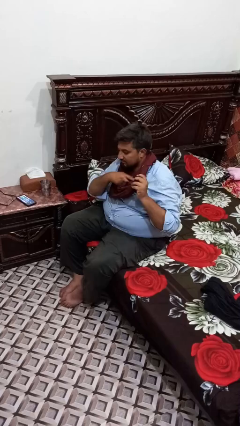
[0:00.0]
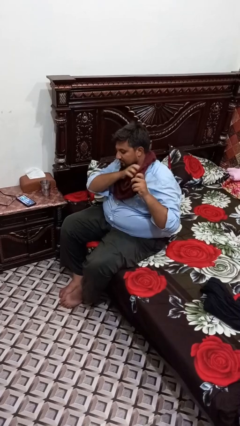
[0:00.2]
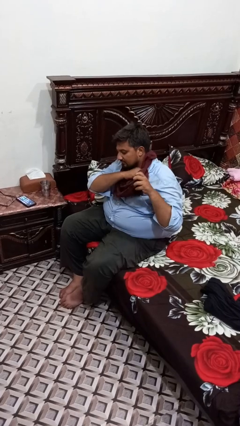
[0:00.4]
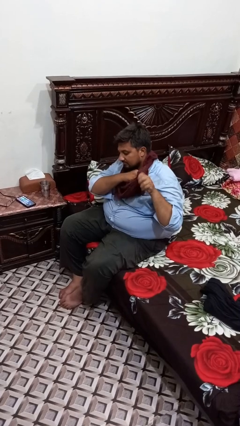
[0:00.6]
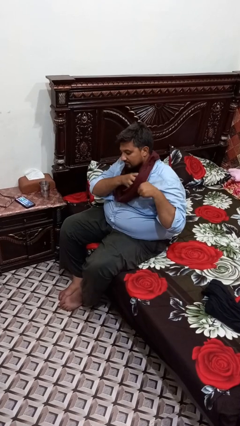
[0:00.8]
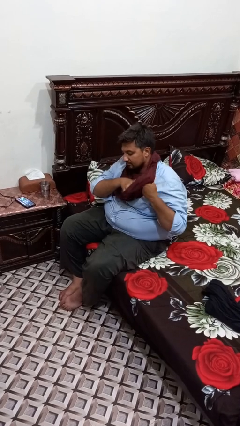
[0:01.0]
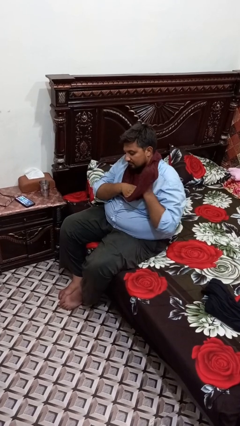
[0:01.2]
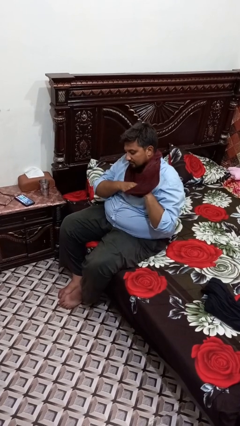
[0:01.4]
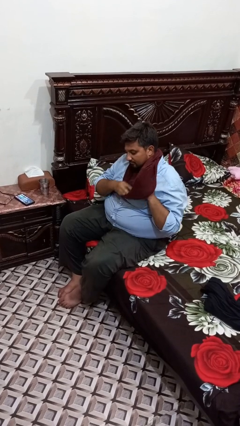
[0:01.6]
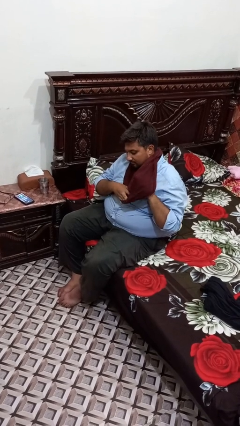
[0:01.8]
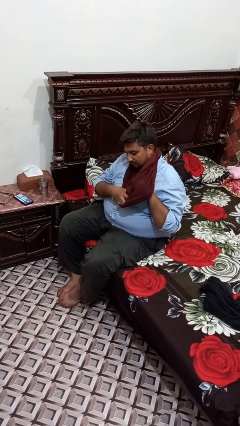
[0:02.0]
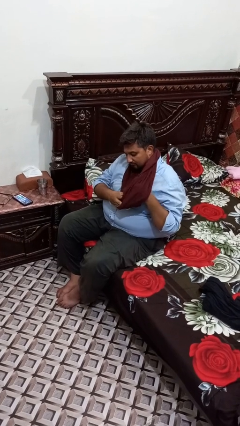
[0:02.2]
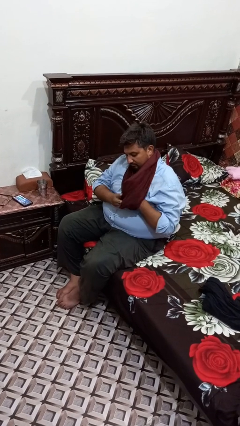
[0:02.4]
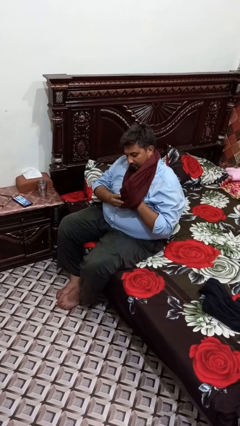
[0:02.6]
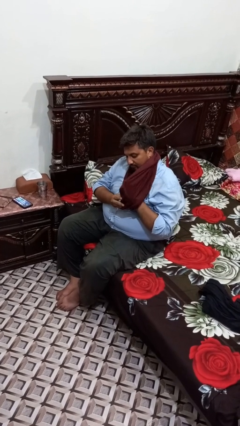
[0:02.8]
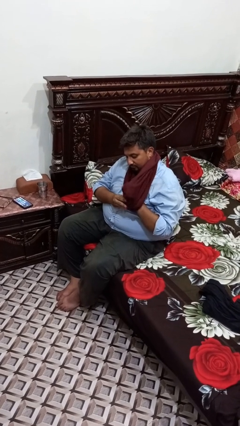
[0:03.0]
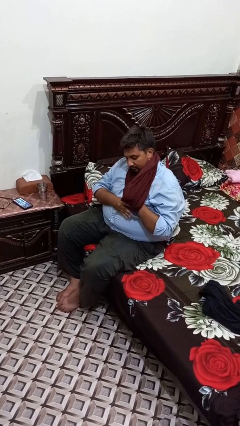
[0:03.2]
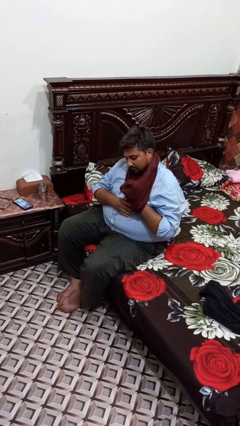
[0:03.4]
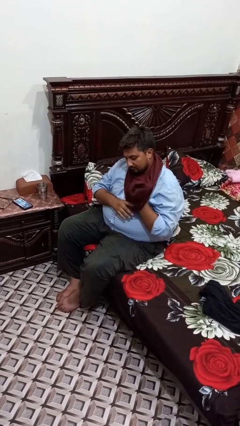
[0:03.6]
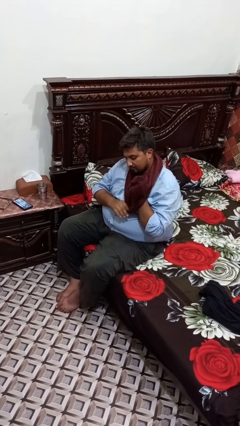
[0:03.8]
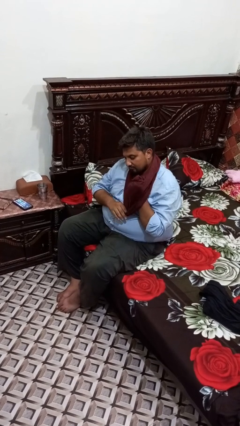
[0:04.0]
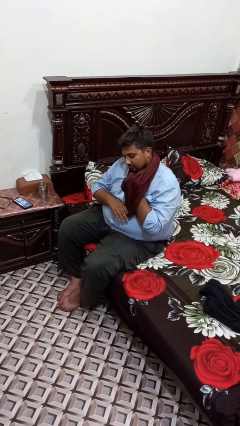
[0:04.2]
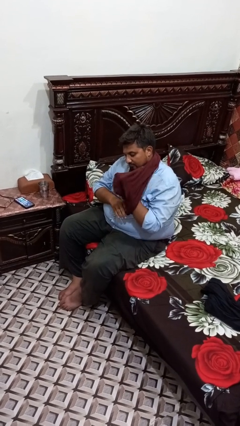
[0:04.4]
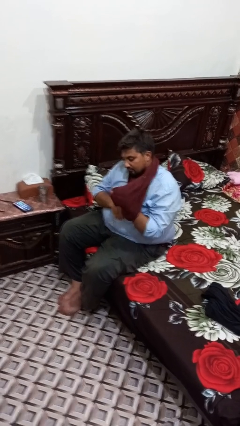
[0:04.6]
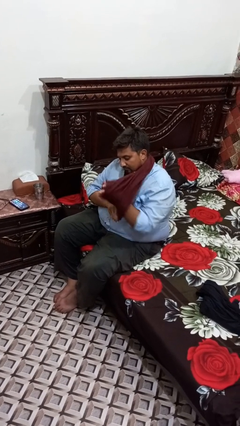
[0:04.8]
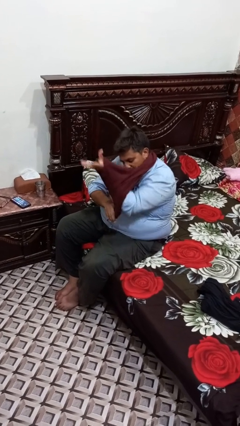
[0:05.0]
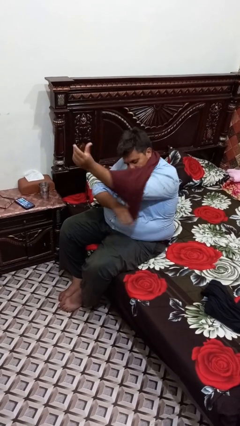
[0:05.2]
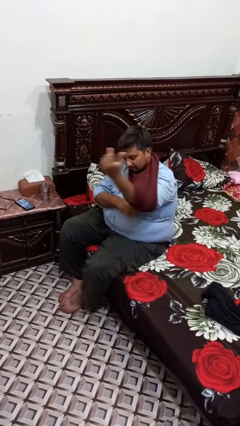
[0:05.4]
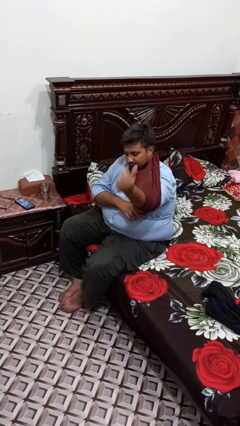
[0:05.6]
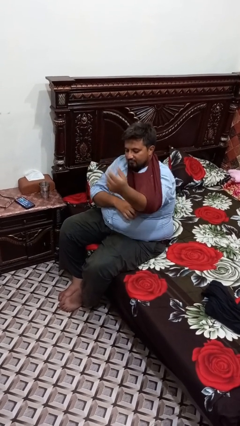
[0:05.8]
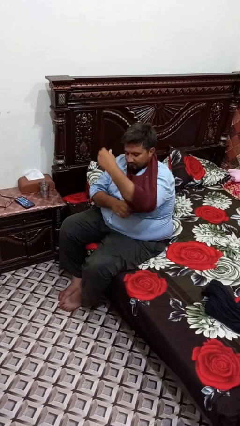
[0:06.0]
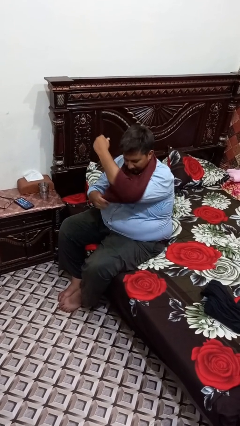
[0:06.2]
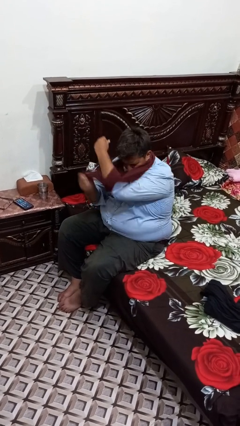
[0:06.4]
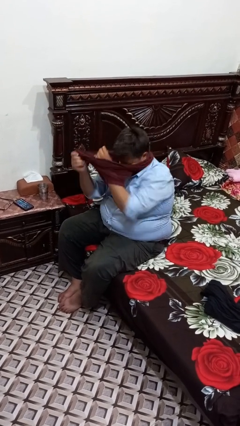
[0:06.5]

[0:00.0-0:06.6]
person puts on shirt

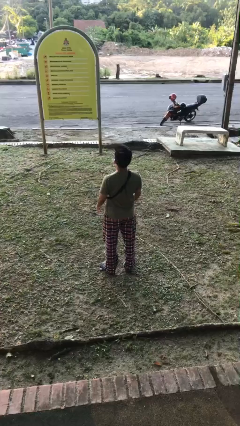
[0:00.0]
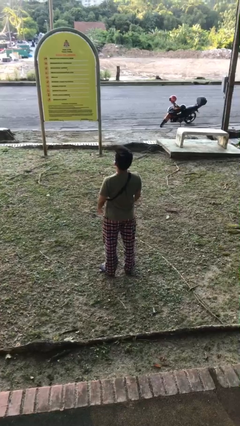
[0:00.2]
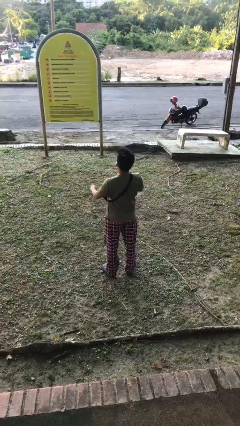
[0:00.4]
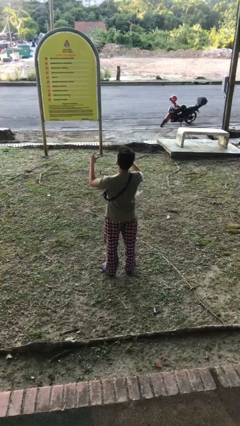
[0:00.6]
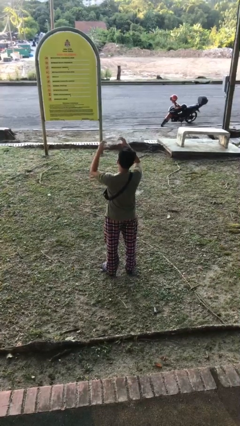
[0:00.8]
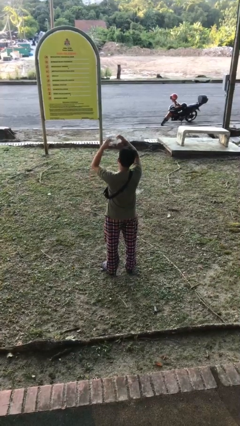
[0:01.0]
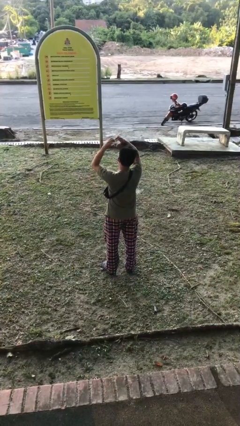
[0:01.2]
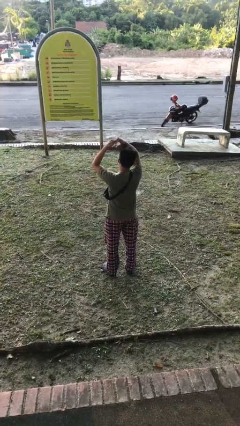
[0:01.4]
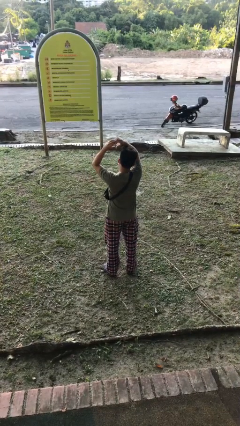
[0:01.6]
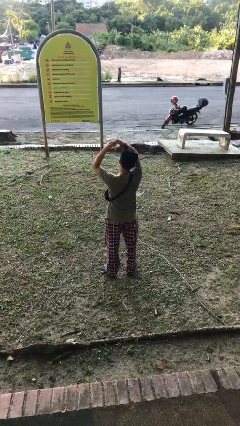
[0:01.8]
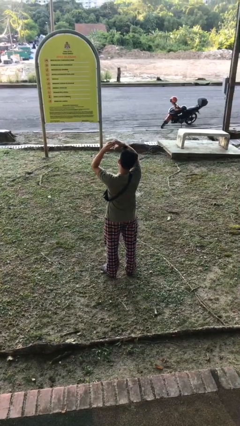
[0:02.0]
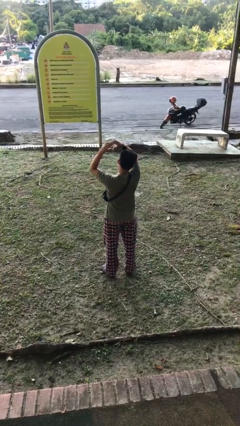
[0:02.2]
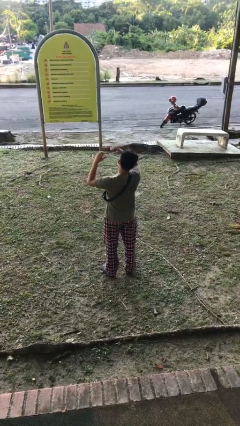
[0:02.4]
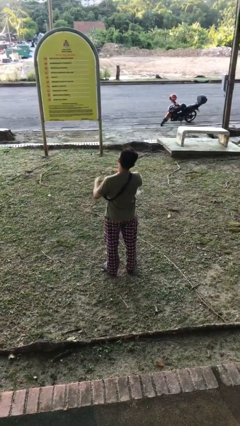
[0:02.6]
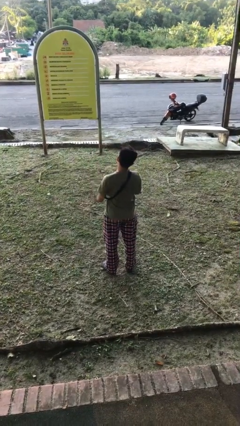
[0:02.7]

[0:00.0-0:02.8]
person gestures heart

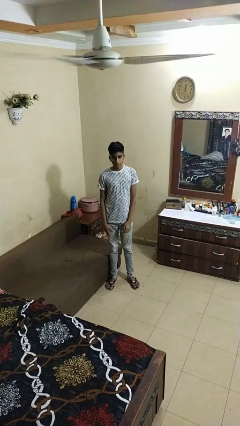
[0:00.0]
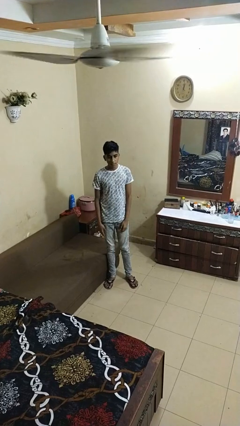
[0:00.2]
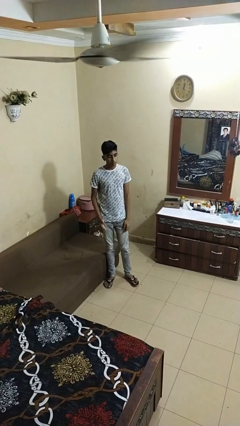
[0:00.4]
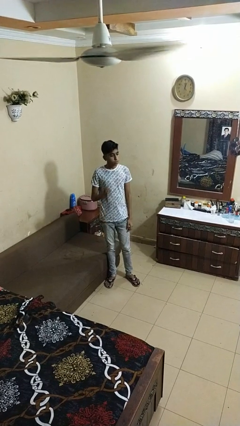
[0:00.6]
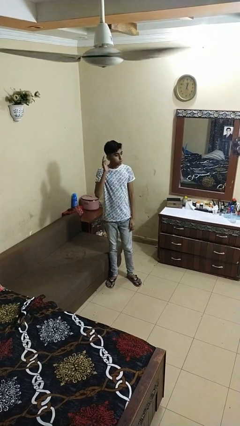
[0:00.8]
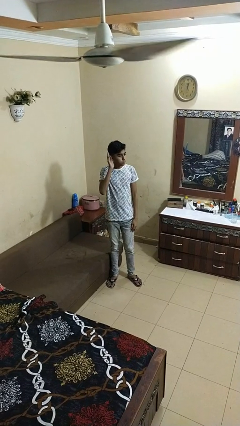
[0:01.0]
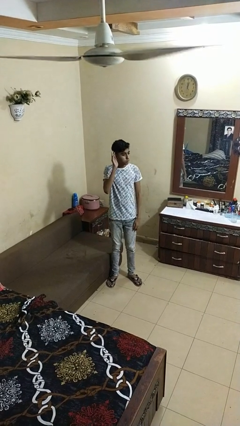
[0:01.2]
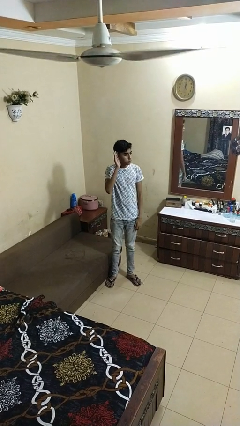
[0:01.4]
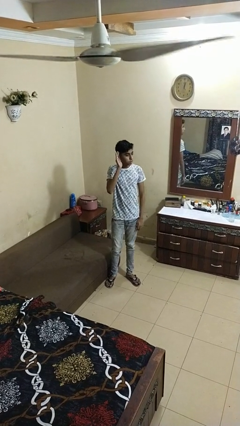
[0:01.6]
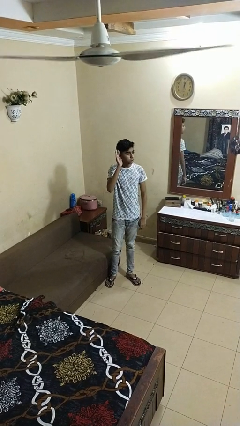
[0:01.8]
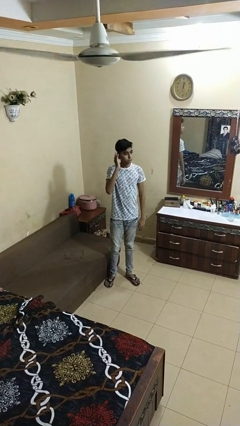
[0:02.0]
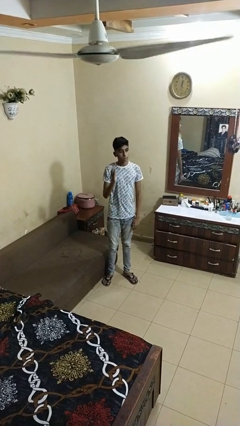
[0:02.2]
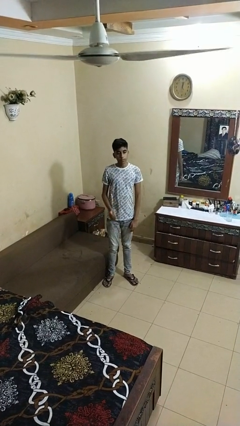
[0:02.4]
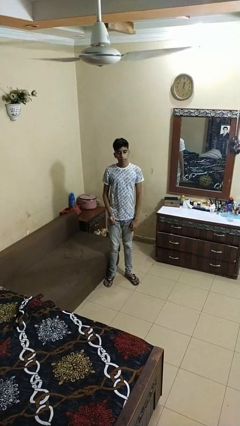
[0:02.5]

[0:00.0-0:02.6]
person gestures listen closely

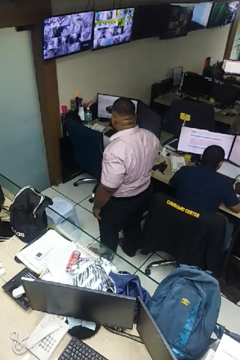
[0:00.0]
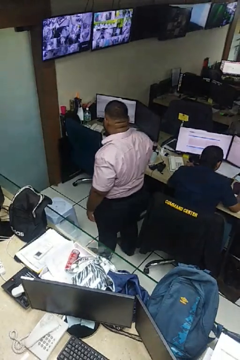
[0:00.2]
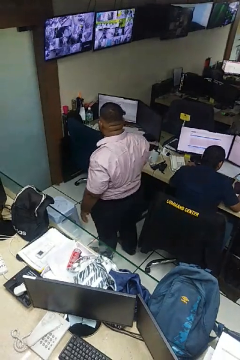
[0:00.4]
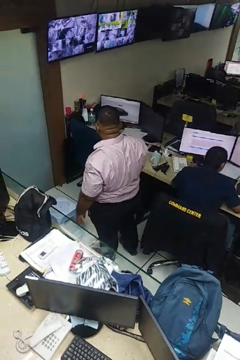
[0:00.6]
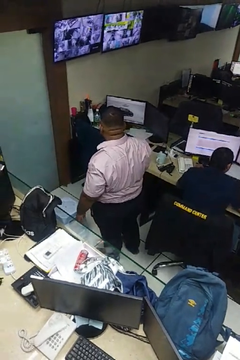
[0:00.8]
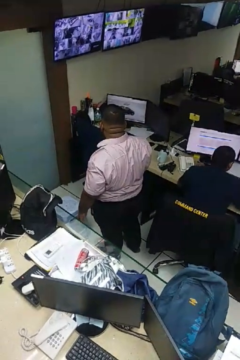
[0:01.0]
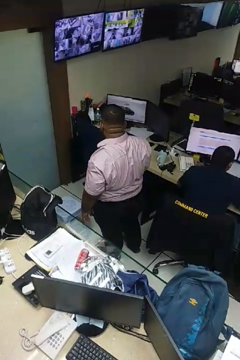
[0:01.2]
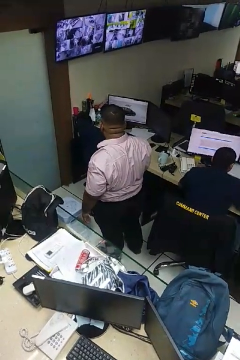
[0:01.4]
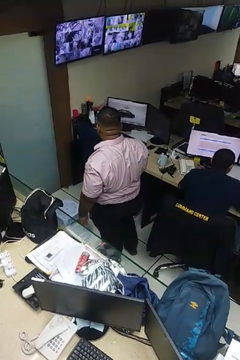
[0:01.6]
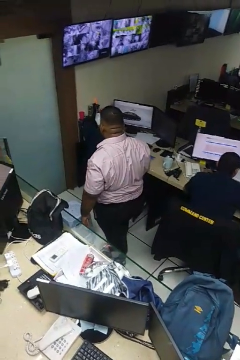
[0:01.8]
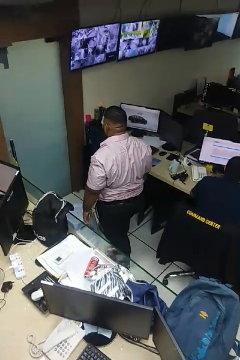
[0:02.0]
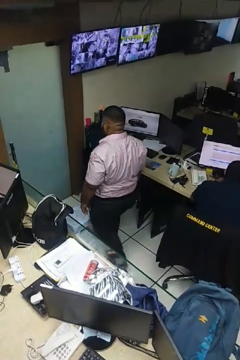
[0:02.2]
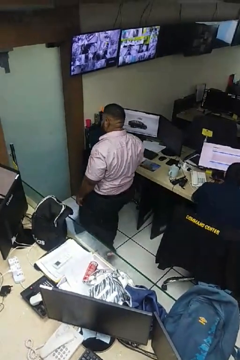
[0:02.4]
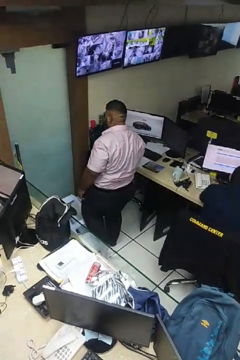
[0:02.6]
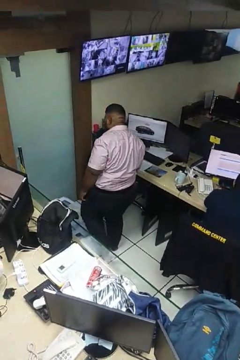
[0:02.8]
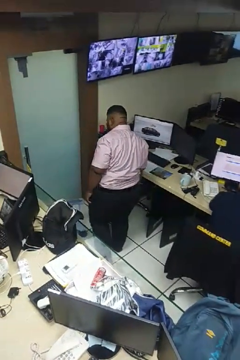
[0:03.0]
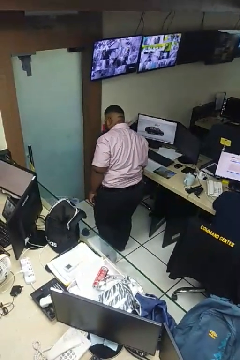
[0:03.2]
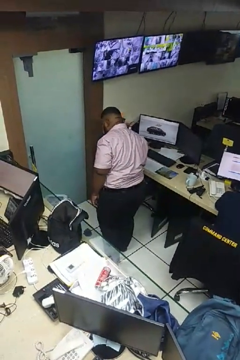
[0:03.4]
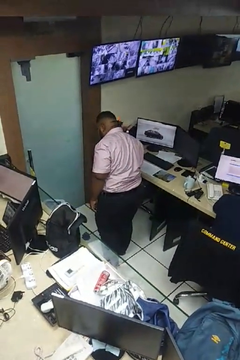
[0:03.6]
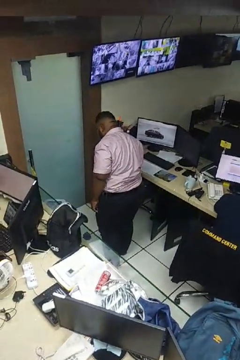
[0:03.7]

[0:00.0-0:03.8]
person knocks over furniture

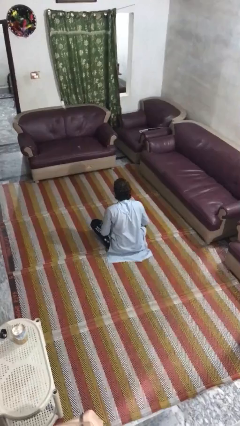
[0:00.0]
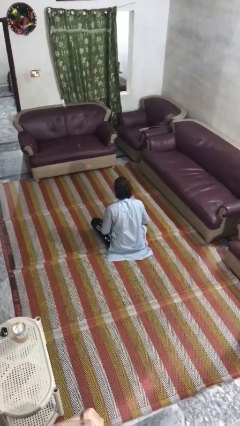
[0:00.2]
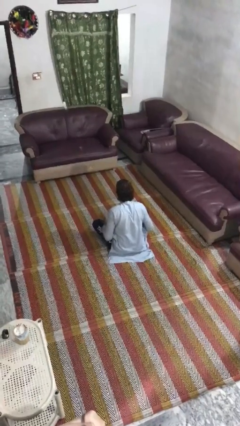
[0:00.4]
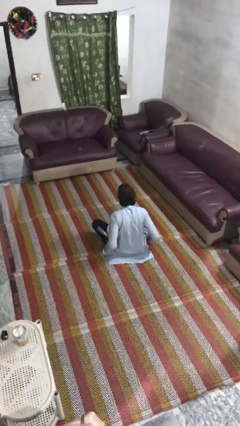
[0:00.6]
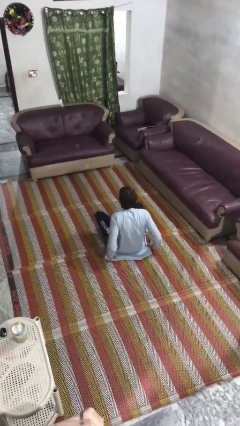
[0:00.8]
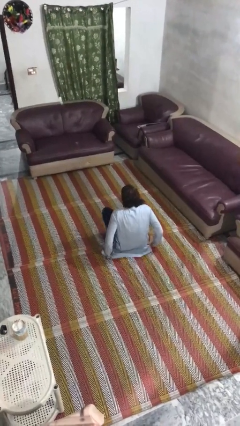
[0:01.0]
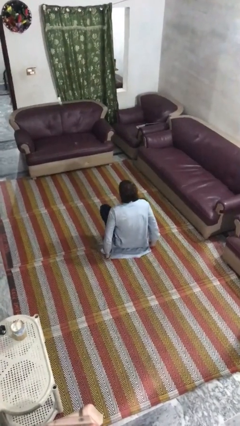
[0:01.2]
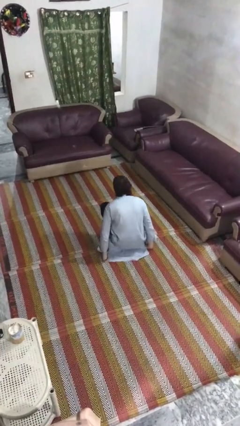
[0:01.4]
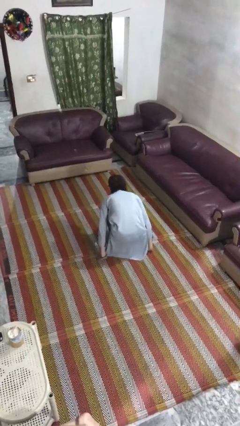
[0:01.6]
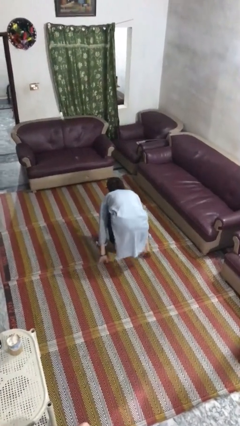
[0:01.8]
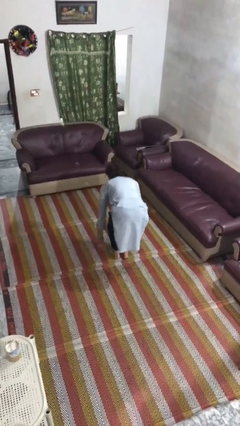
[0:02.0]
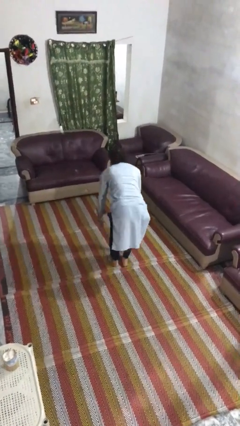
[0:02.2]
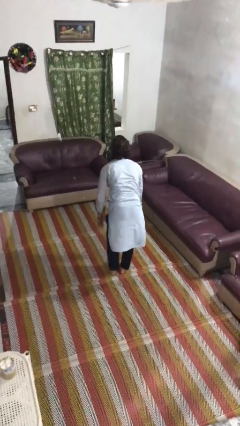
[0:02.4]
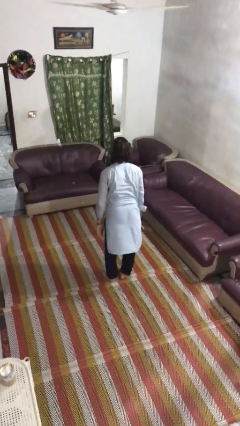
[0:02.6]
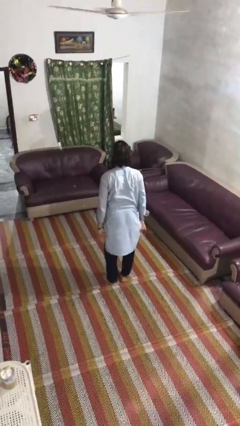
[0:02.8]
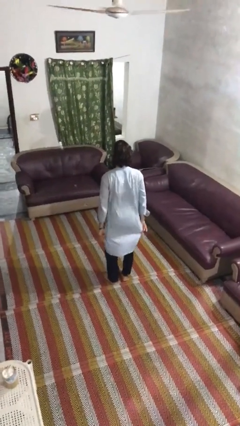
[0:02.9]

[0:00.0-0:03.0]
person stands up from floor
